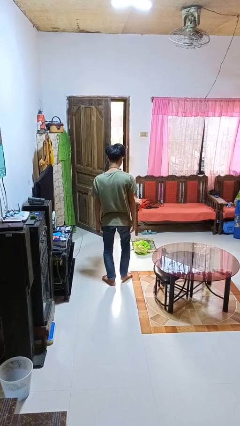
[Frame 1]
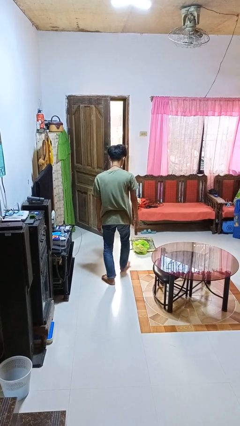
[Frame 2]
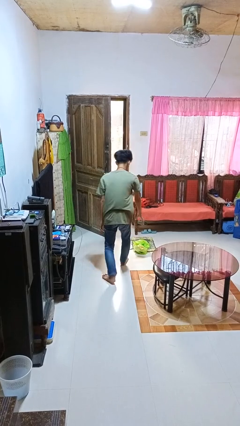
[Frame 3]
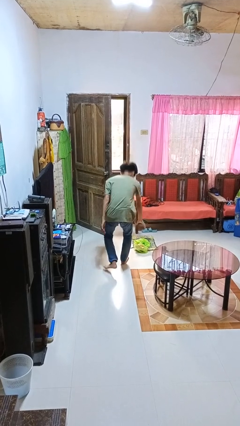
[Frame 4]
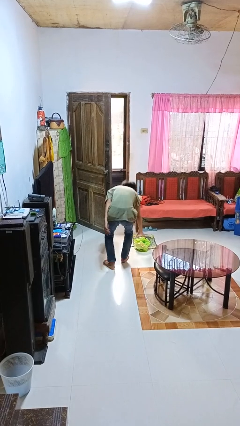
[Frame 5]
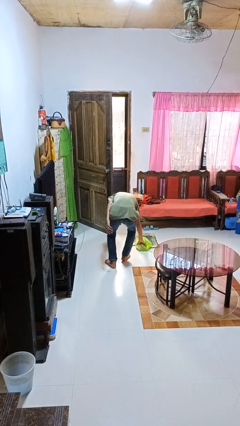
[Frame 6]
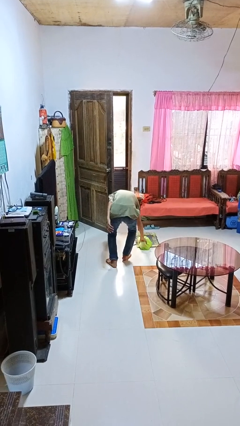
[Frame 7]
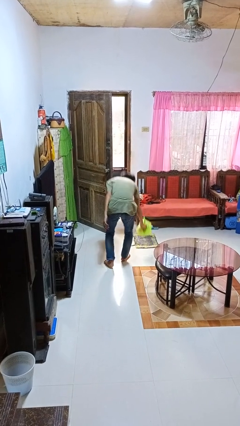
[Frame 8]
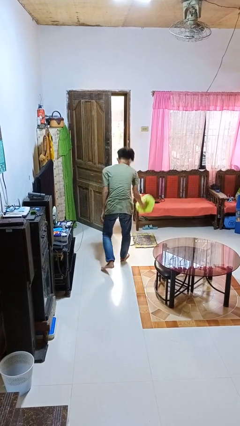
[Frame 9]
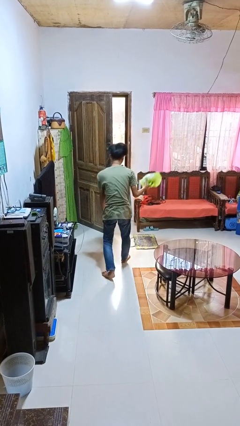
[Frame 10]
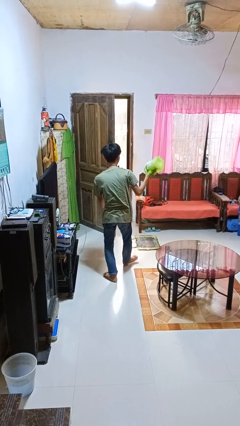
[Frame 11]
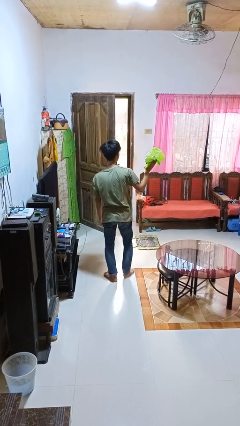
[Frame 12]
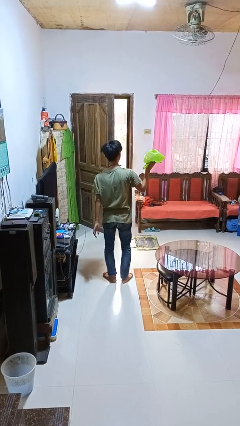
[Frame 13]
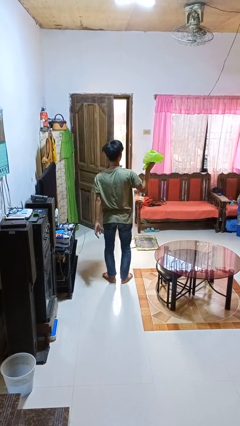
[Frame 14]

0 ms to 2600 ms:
person picks up object from floor

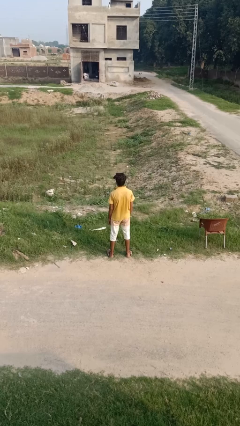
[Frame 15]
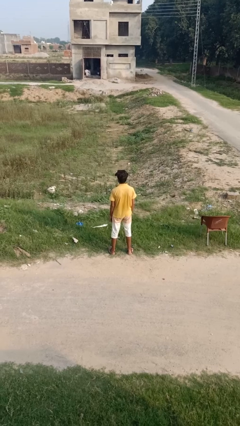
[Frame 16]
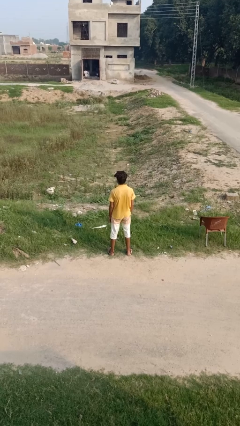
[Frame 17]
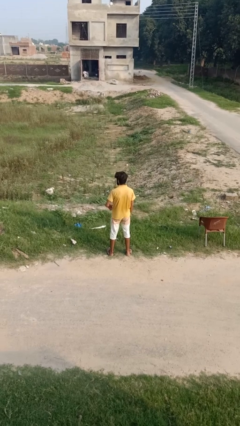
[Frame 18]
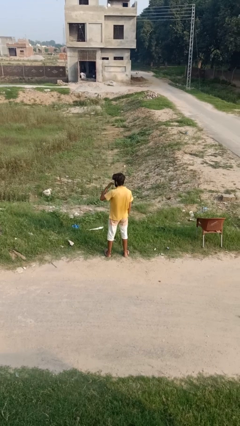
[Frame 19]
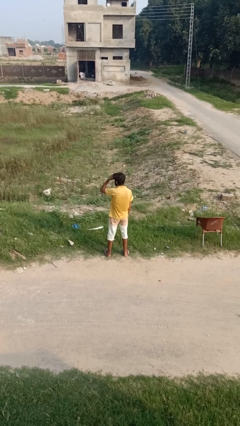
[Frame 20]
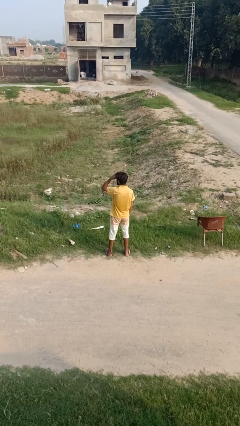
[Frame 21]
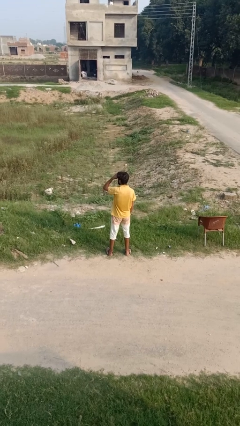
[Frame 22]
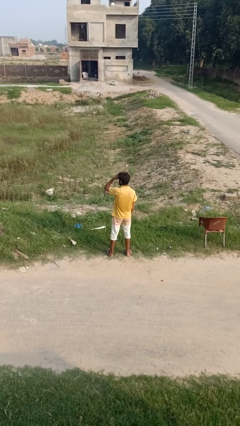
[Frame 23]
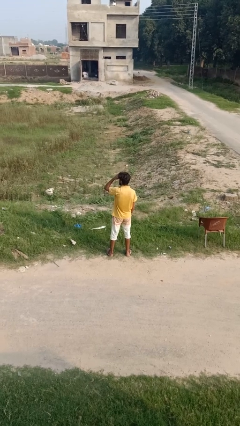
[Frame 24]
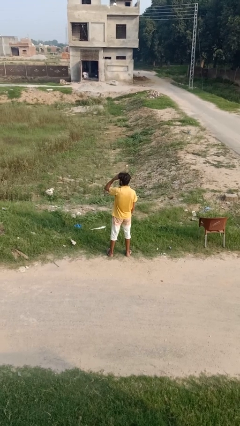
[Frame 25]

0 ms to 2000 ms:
person shades eyes

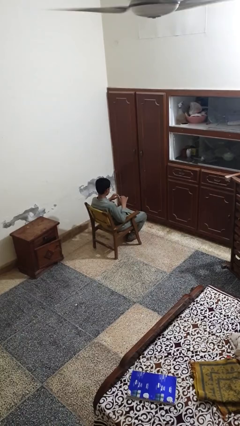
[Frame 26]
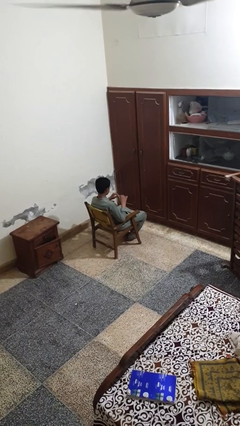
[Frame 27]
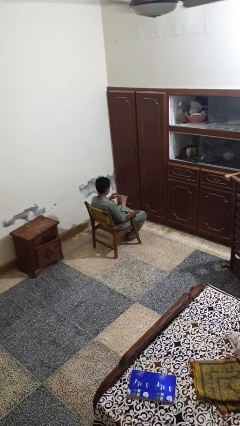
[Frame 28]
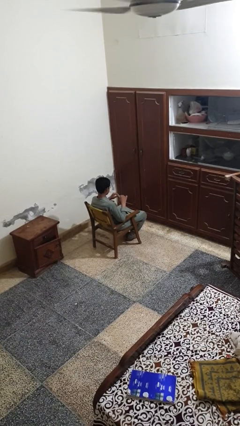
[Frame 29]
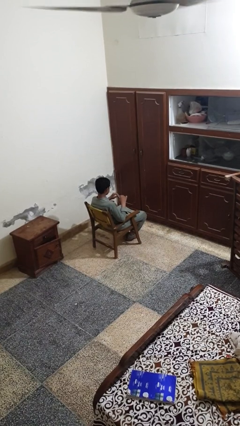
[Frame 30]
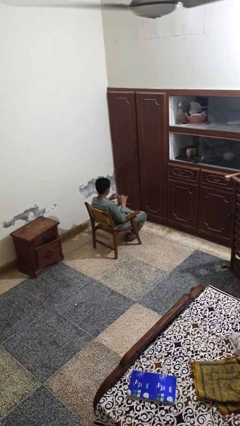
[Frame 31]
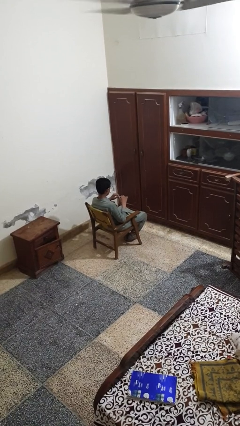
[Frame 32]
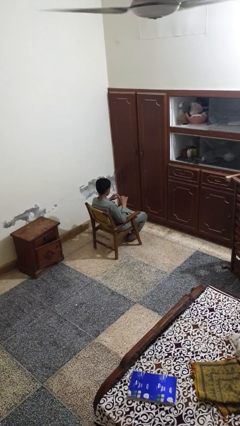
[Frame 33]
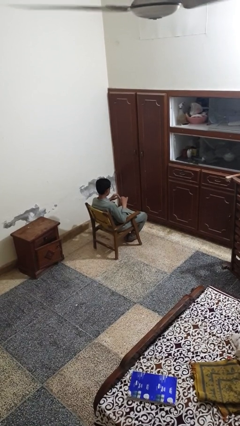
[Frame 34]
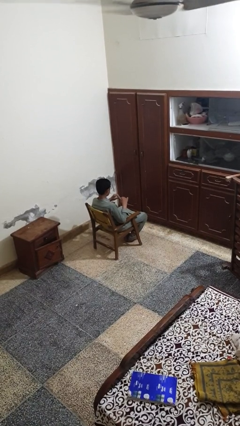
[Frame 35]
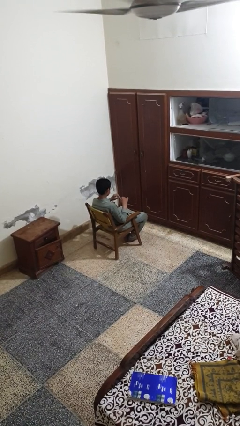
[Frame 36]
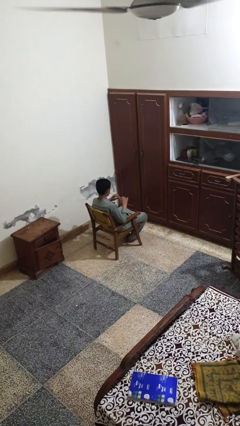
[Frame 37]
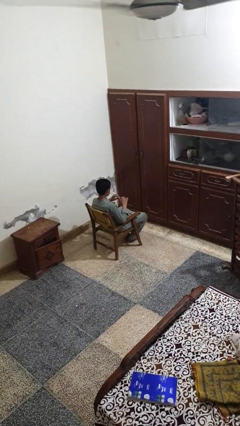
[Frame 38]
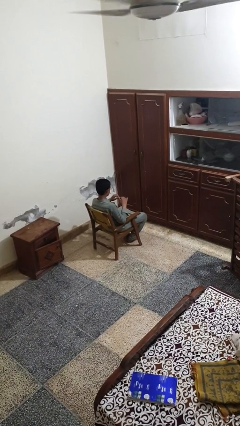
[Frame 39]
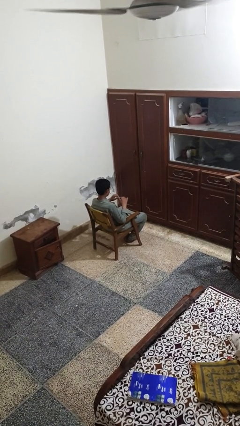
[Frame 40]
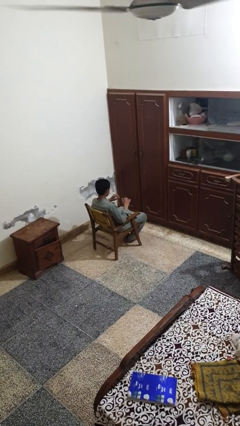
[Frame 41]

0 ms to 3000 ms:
person clips fingernails

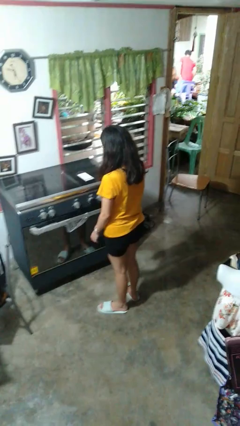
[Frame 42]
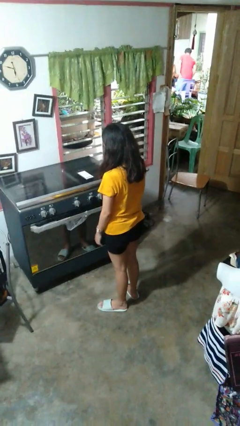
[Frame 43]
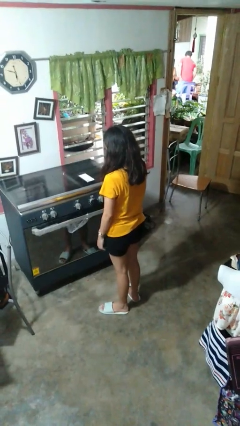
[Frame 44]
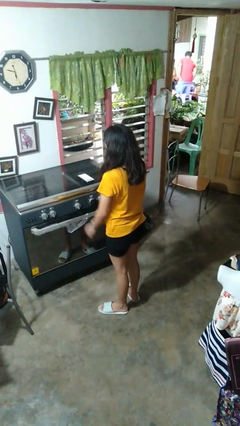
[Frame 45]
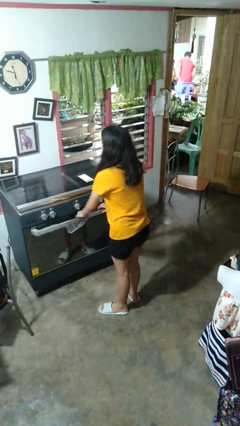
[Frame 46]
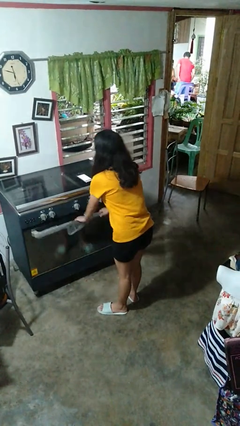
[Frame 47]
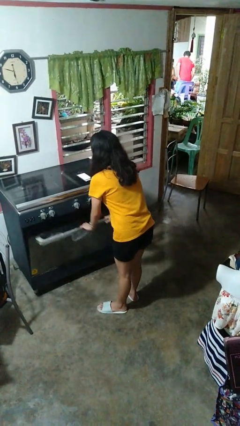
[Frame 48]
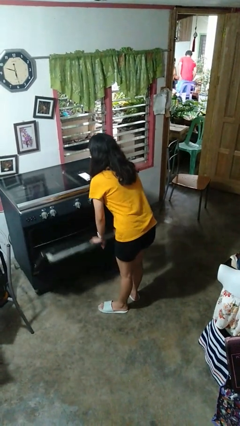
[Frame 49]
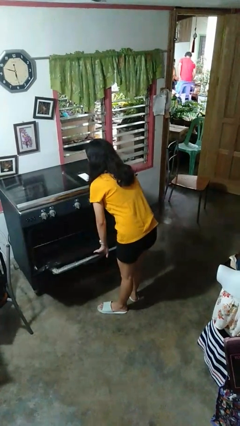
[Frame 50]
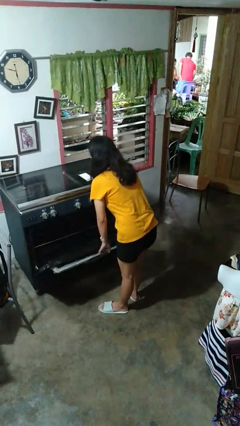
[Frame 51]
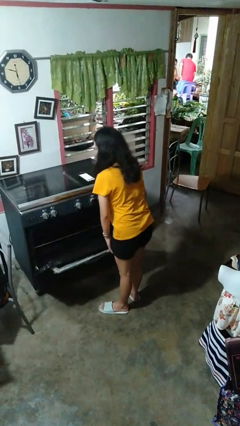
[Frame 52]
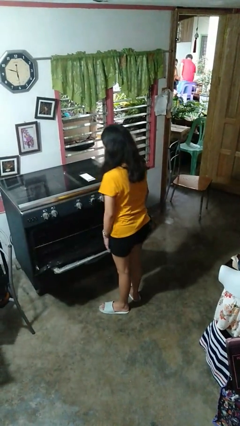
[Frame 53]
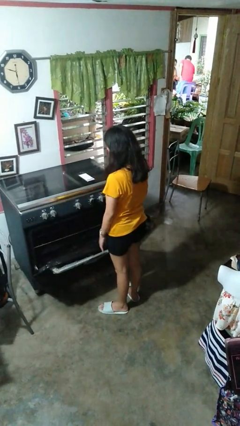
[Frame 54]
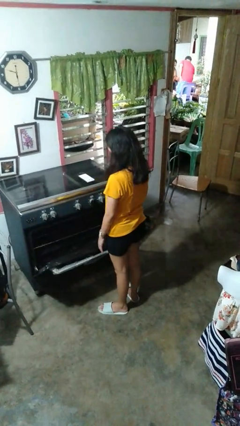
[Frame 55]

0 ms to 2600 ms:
person opens oven door

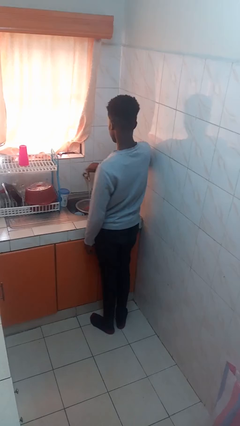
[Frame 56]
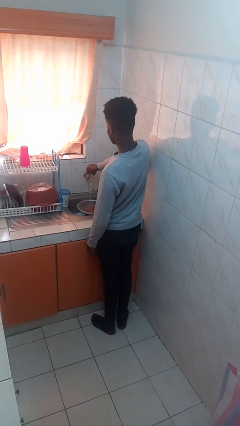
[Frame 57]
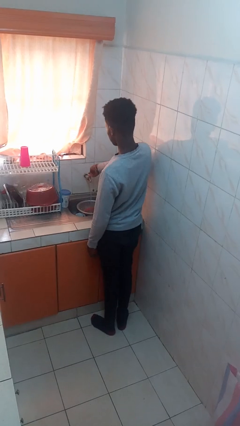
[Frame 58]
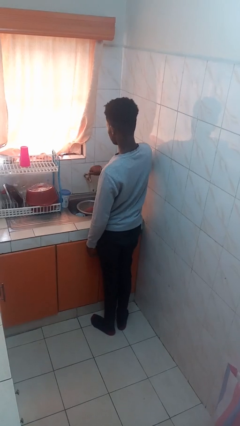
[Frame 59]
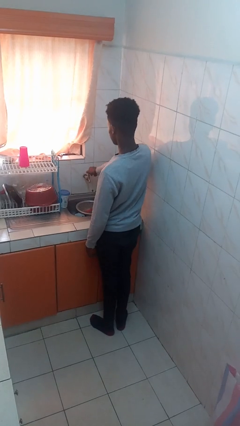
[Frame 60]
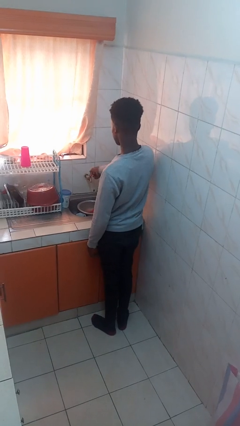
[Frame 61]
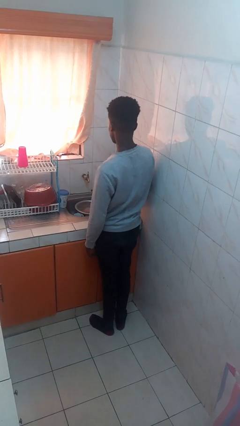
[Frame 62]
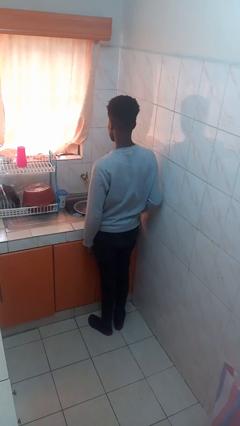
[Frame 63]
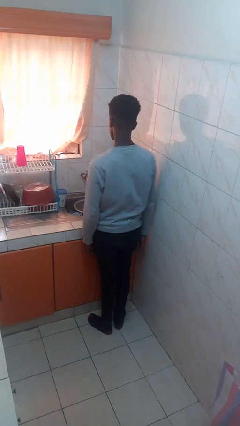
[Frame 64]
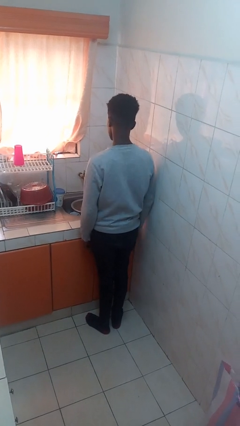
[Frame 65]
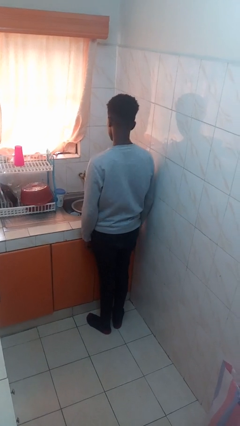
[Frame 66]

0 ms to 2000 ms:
person turns off faucet

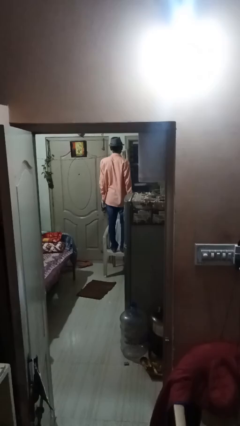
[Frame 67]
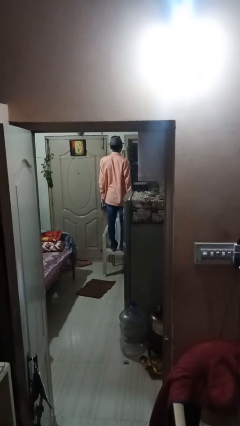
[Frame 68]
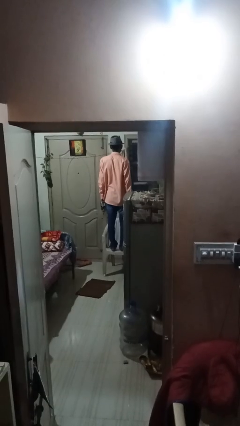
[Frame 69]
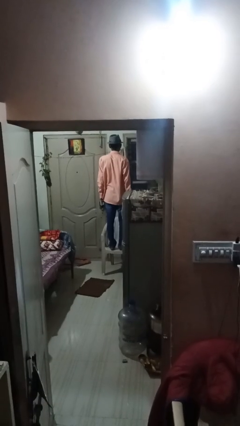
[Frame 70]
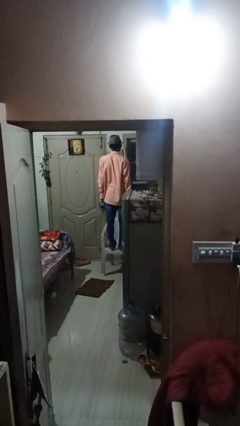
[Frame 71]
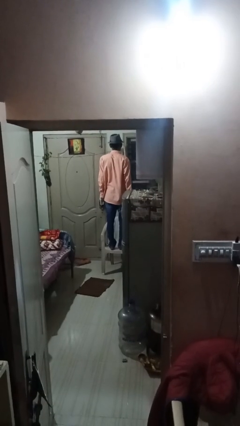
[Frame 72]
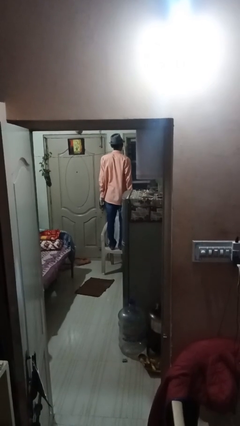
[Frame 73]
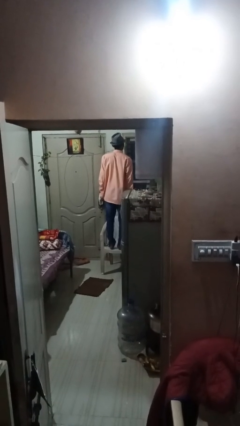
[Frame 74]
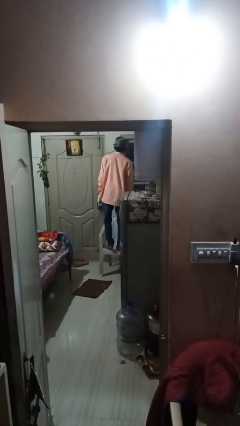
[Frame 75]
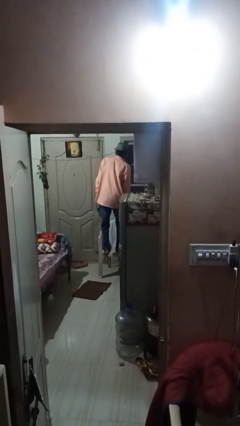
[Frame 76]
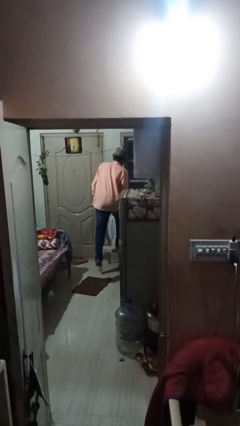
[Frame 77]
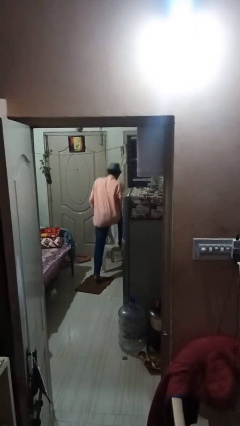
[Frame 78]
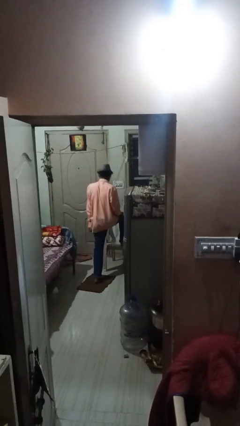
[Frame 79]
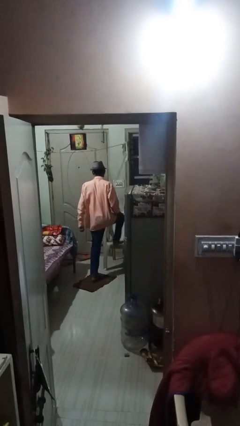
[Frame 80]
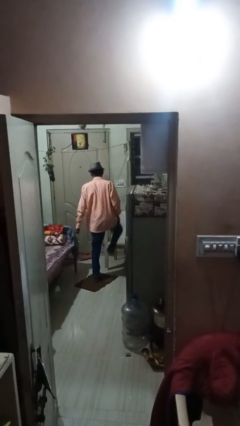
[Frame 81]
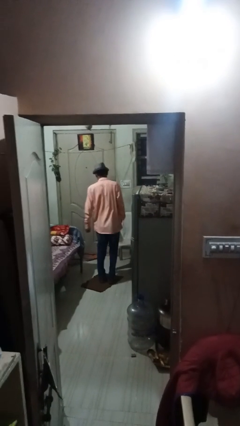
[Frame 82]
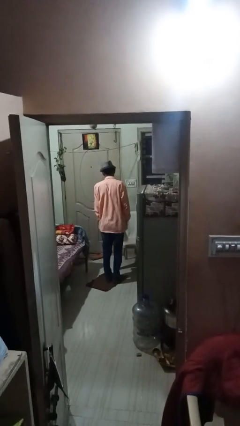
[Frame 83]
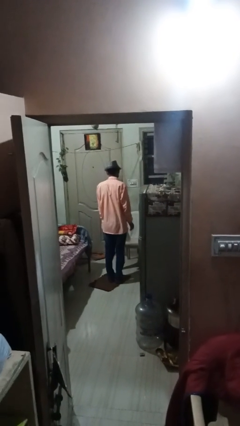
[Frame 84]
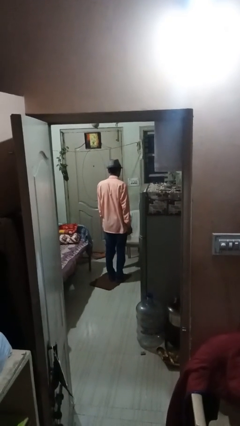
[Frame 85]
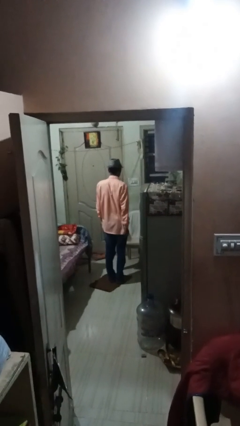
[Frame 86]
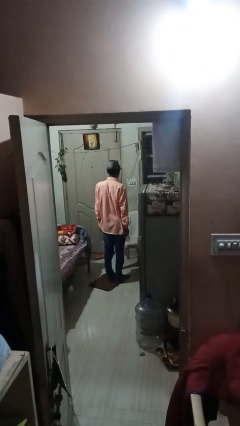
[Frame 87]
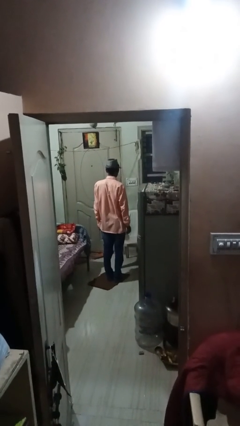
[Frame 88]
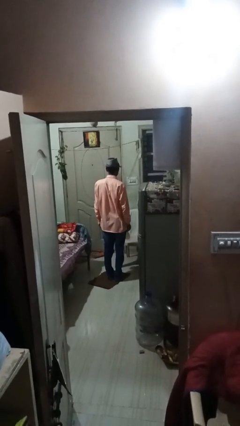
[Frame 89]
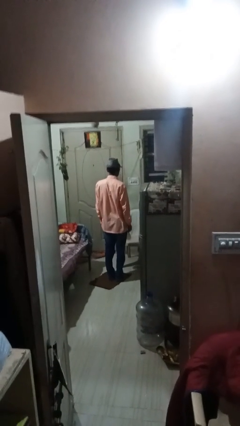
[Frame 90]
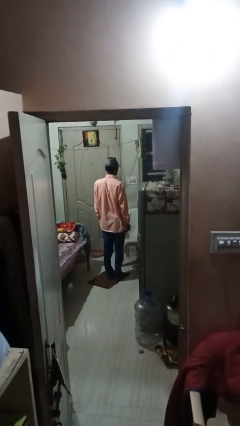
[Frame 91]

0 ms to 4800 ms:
person climbs off chair

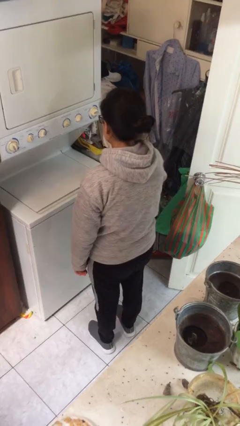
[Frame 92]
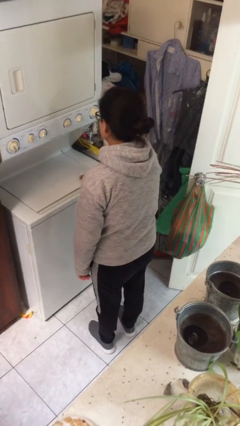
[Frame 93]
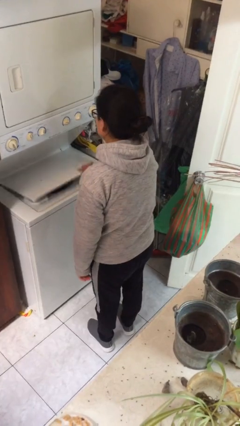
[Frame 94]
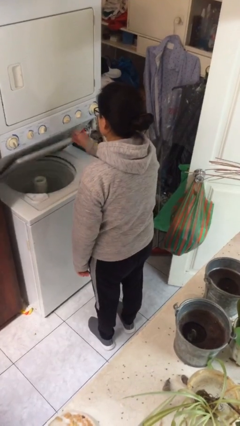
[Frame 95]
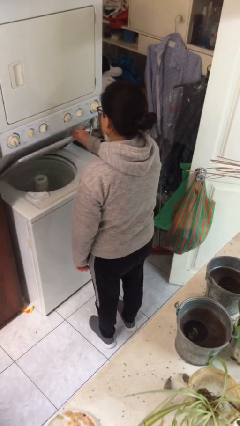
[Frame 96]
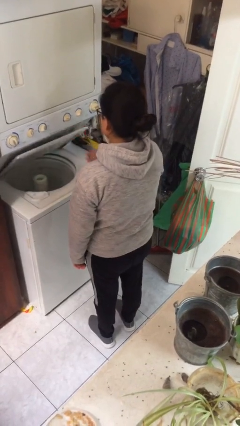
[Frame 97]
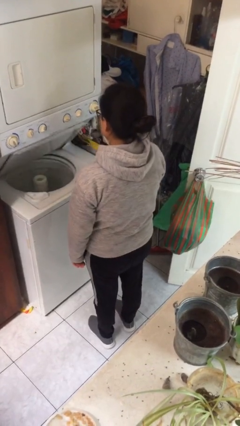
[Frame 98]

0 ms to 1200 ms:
person opens clothes washer
